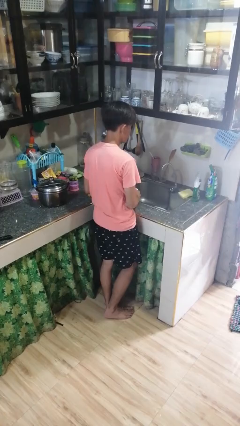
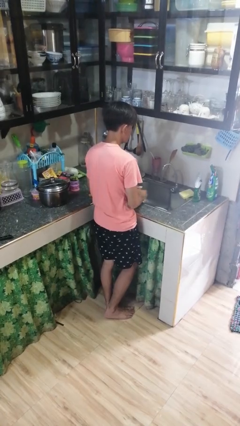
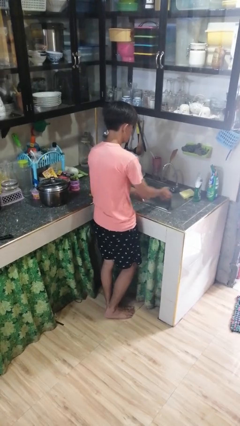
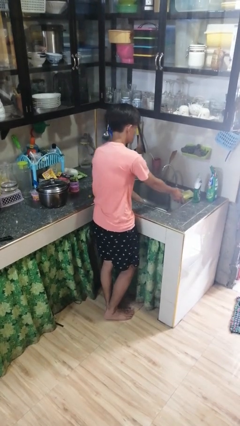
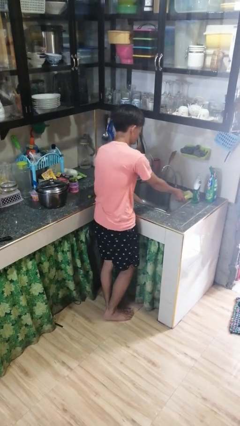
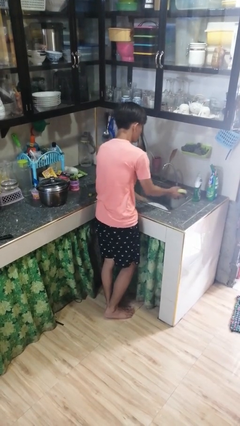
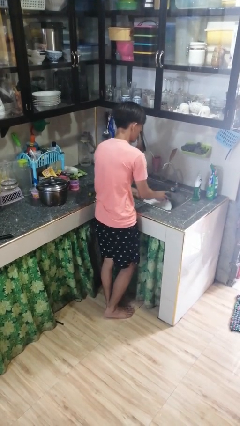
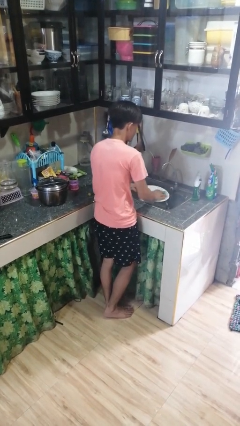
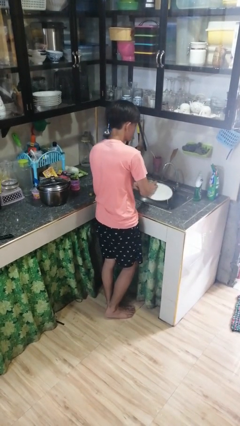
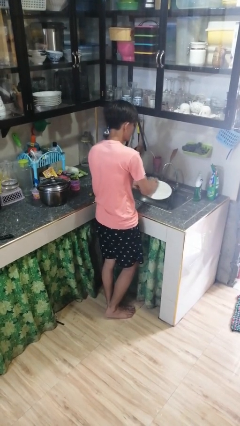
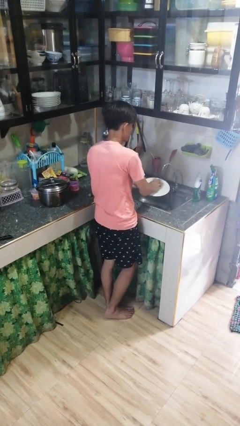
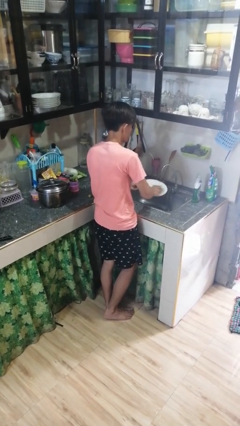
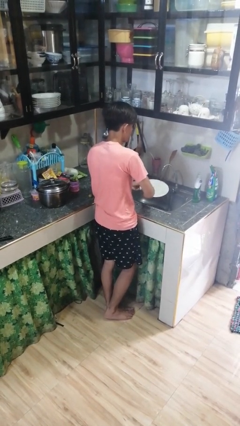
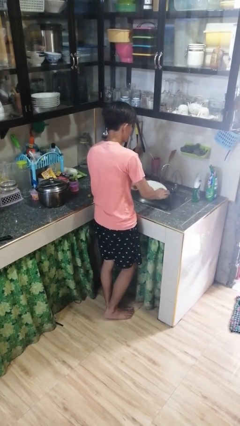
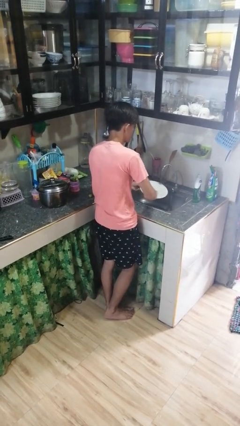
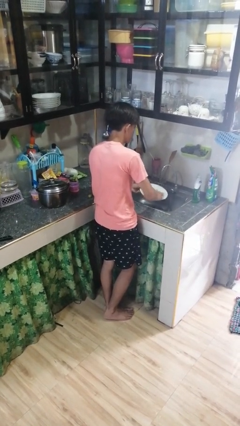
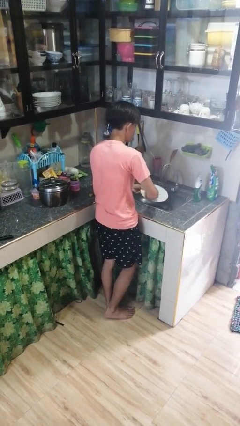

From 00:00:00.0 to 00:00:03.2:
person washes dish

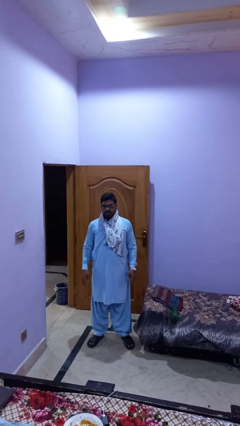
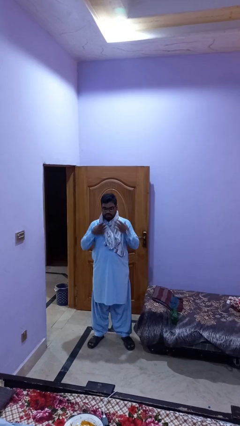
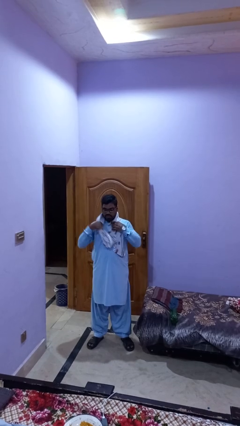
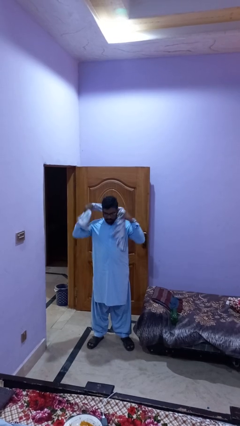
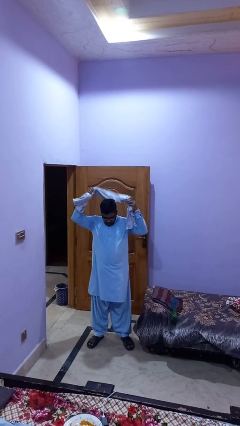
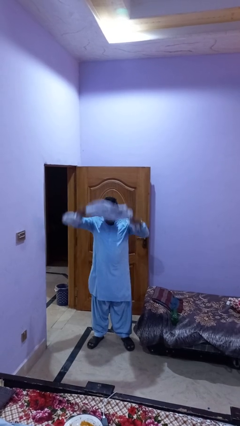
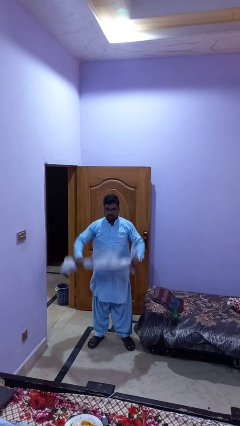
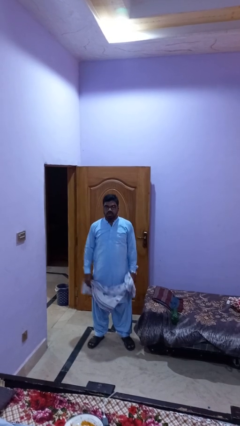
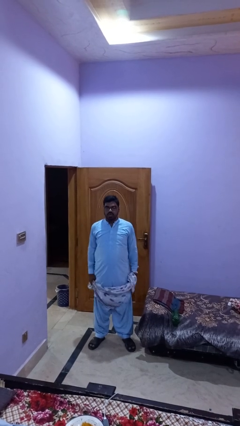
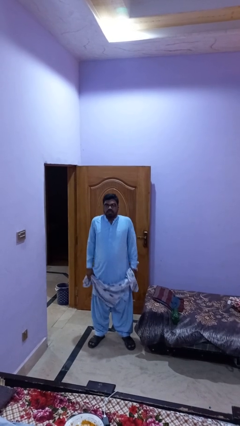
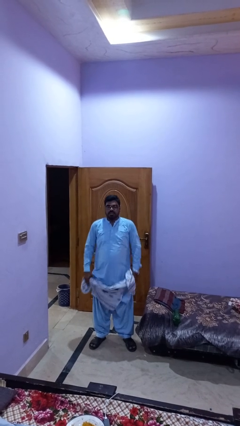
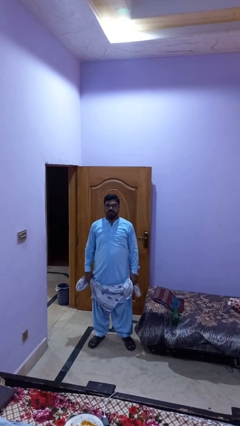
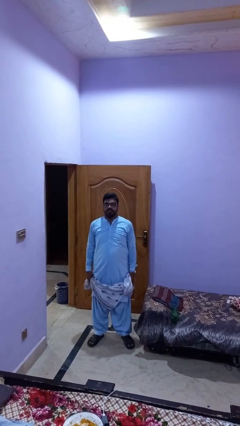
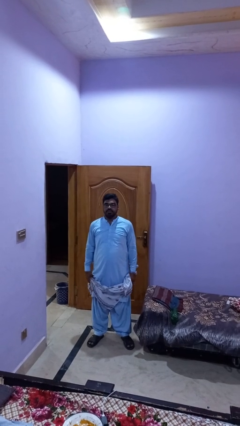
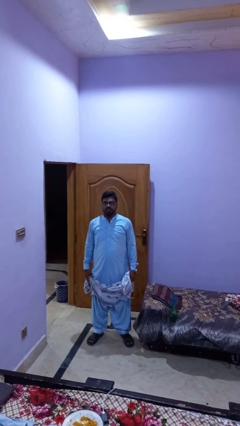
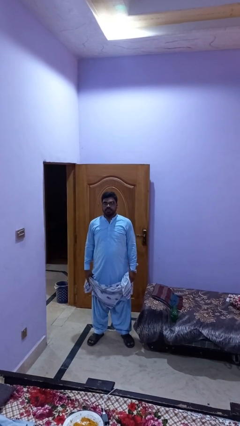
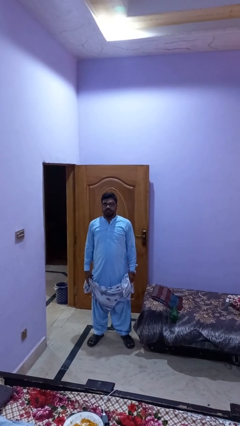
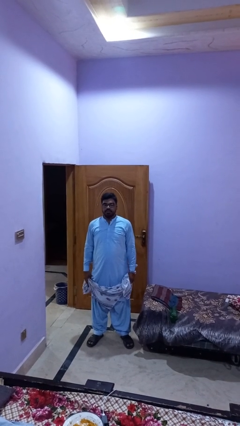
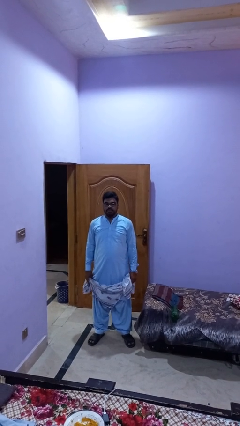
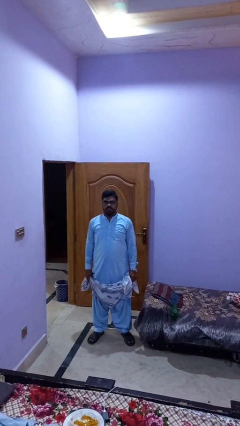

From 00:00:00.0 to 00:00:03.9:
person takes off scarf

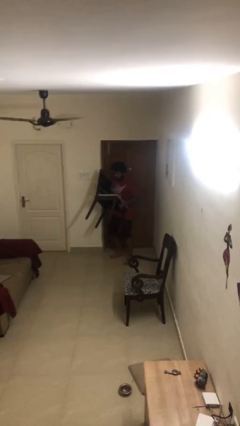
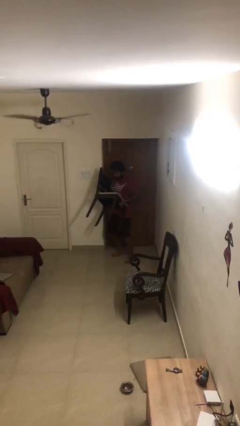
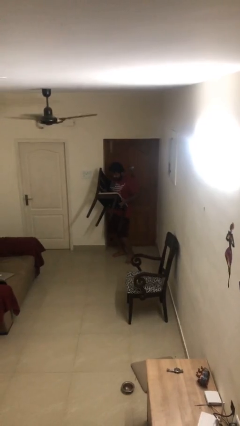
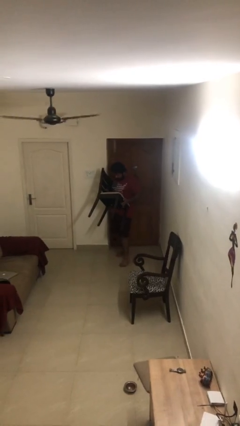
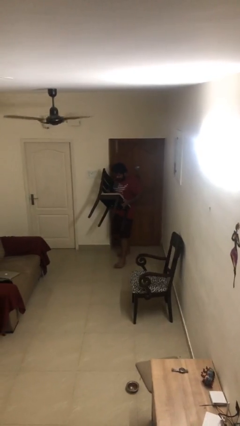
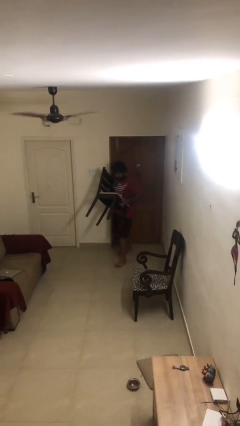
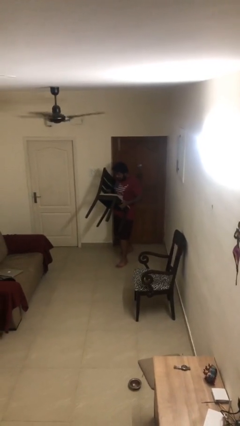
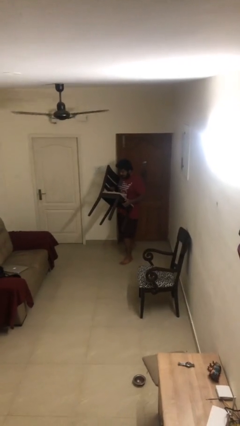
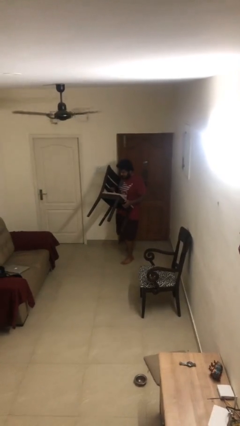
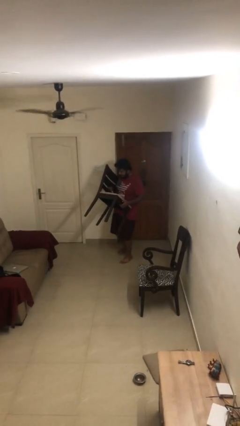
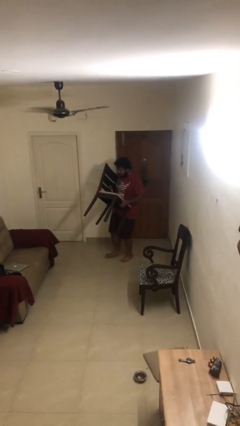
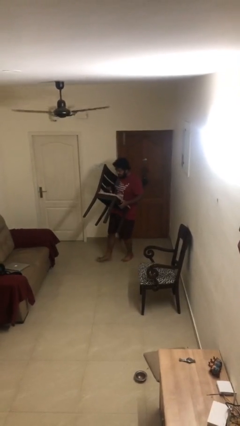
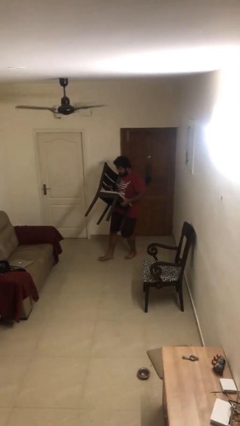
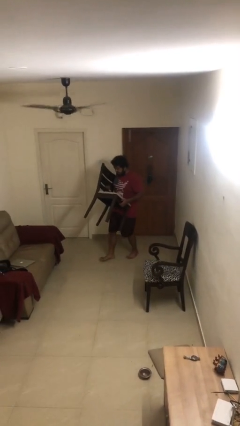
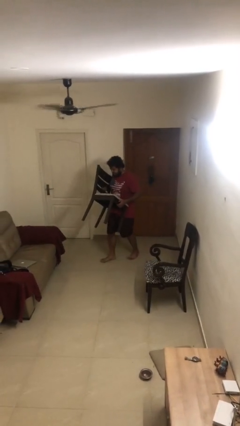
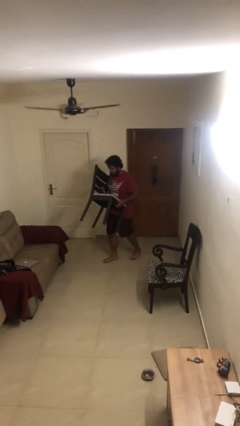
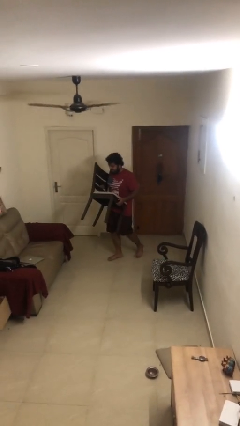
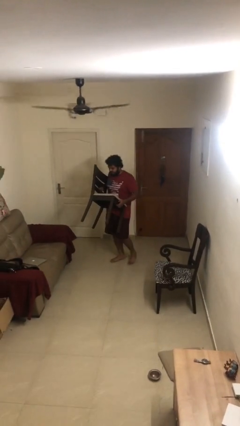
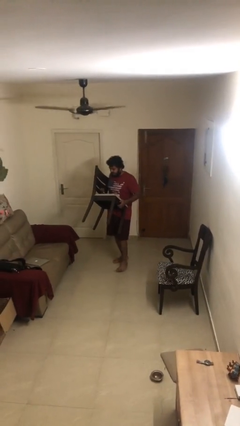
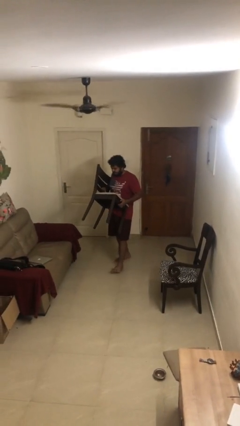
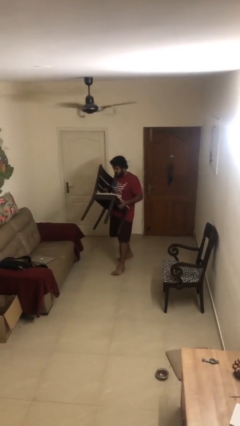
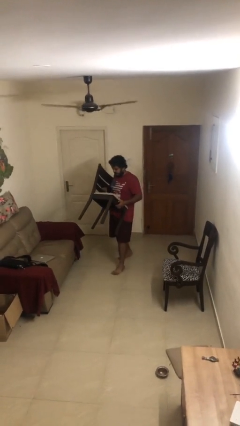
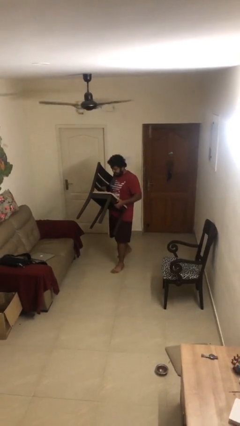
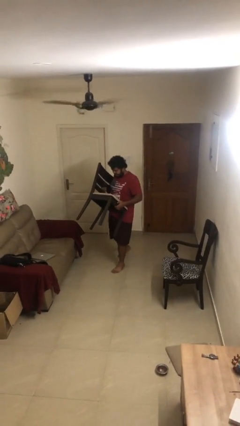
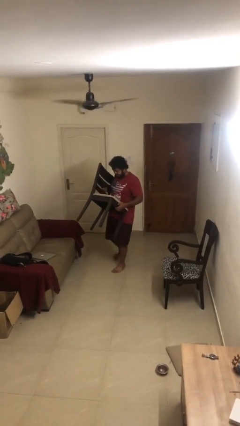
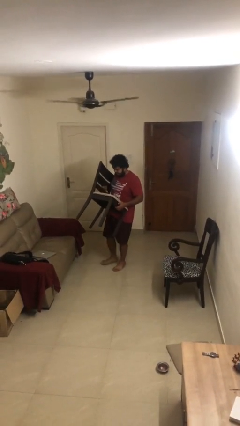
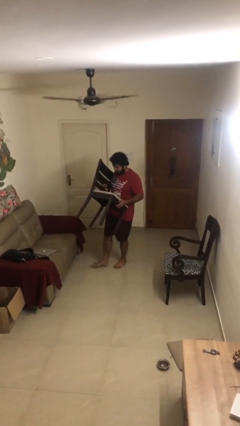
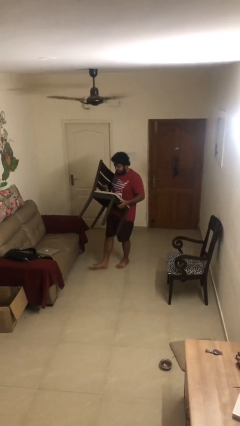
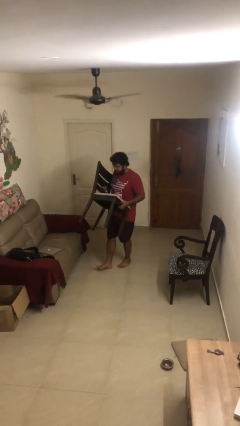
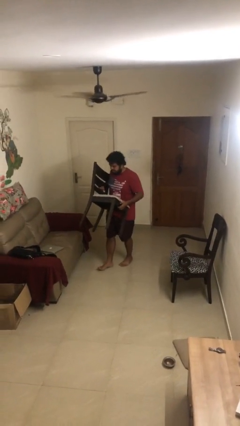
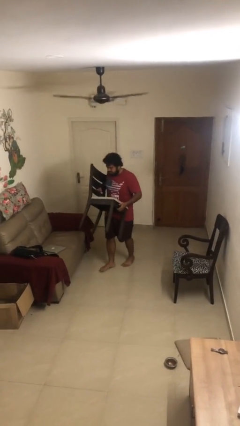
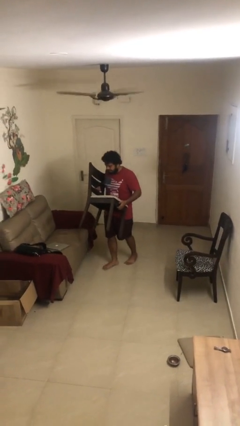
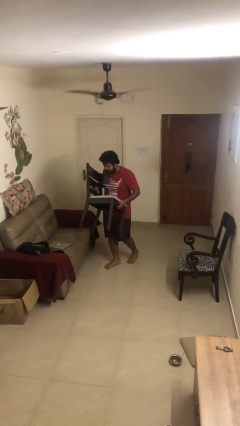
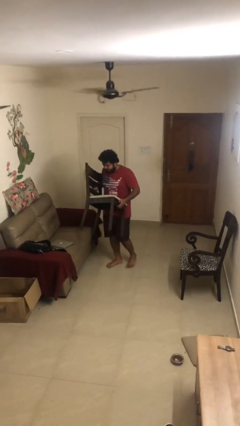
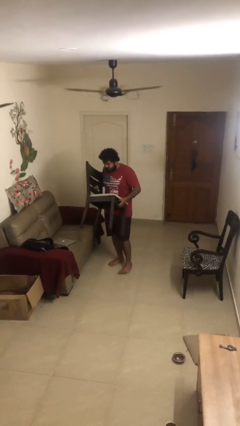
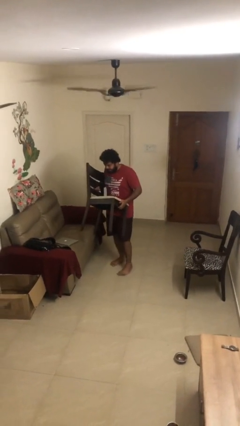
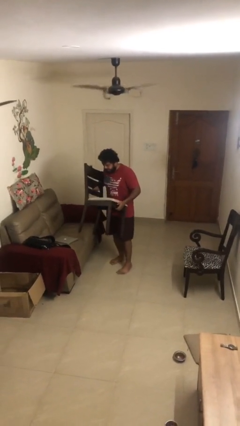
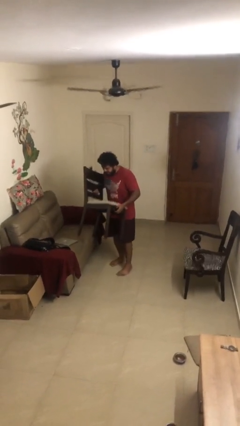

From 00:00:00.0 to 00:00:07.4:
person carries heavy object

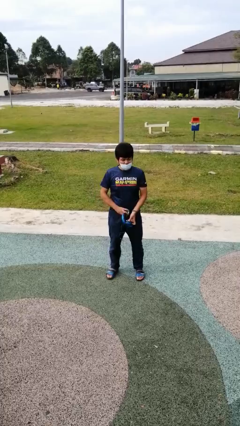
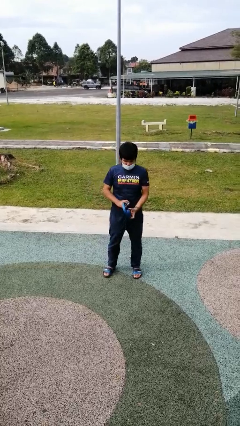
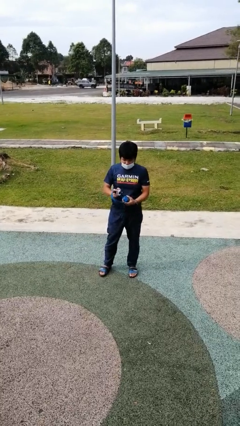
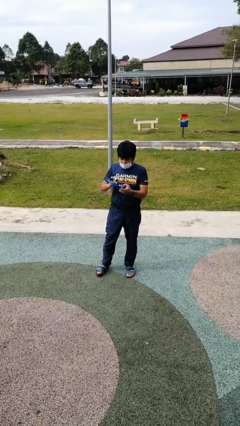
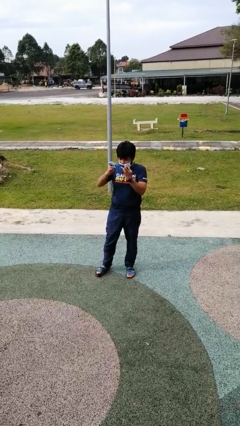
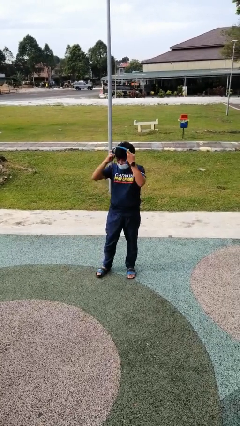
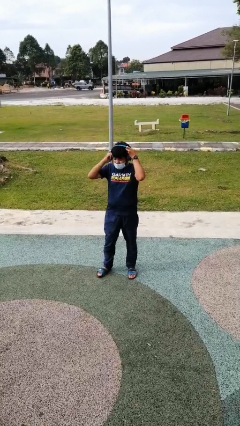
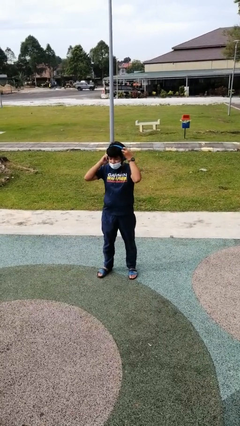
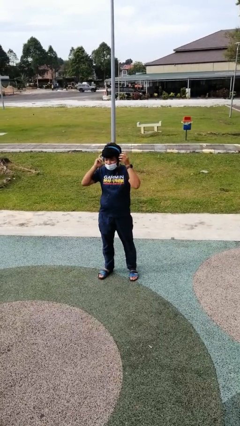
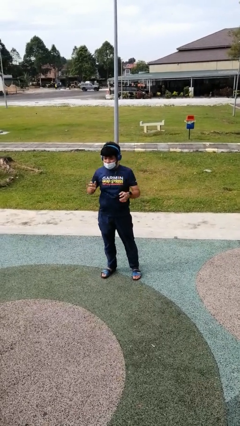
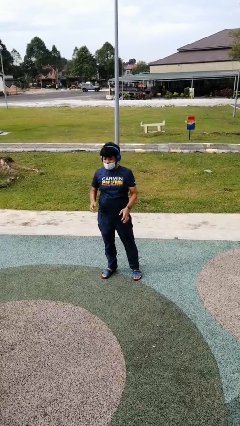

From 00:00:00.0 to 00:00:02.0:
person puts on headphones

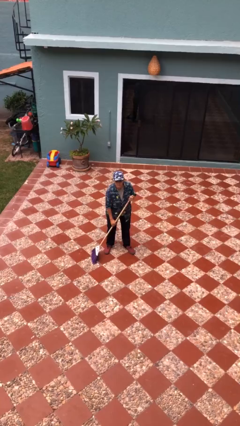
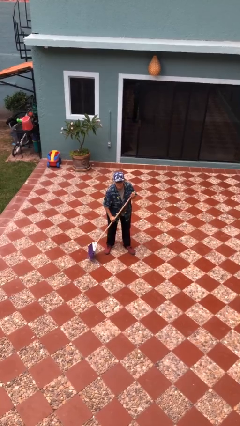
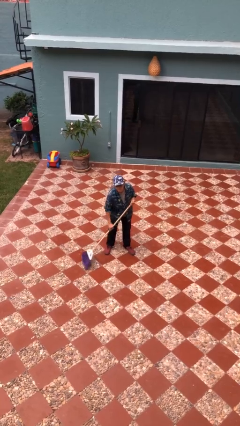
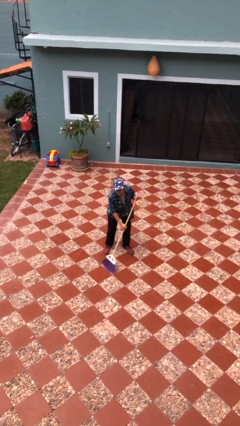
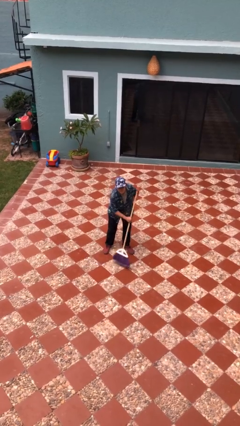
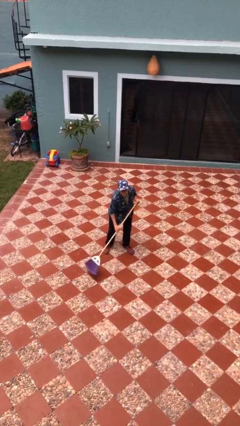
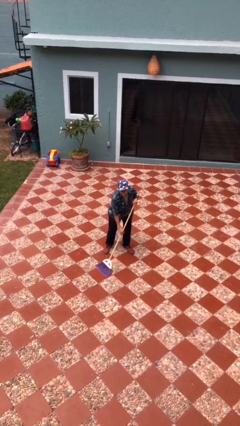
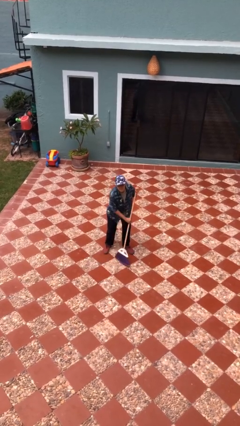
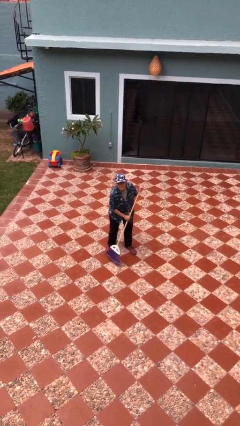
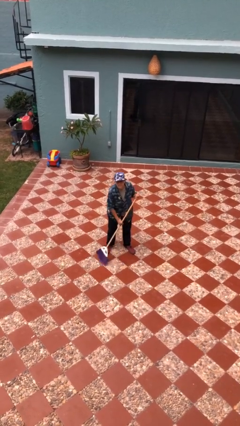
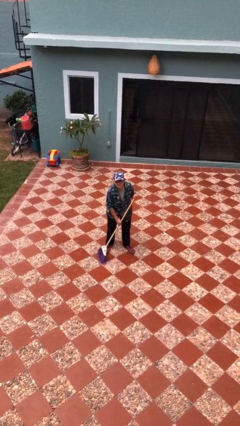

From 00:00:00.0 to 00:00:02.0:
person sweeps floor
